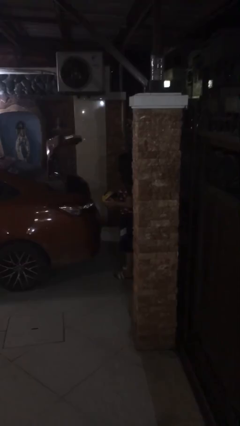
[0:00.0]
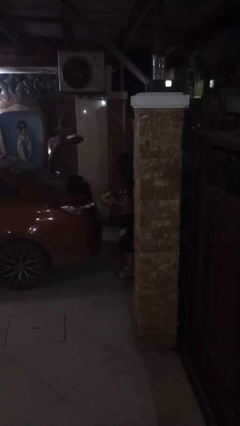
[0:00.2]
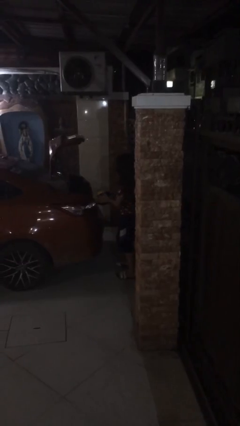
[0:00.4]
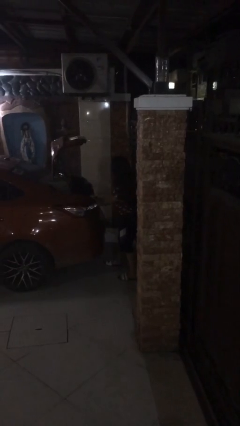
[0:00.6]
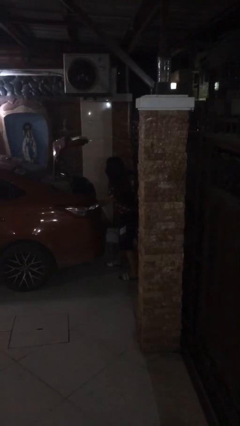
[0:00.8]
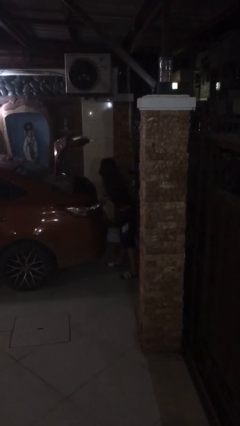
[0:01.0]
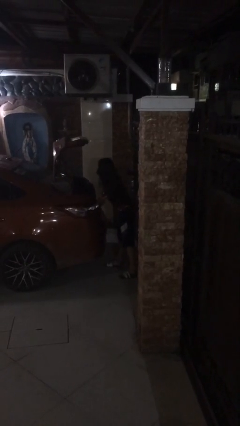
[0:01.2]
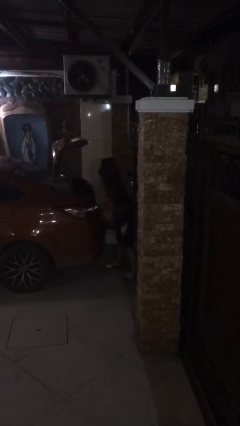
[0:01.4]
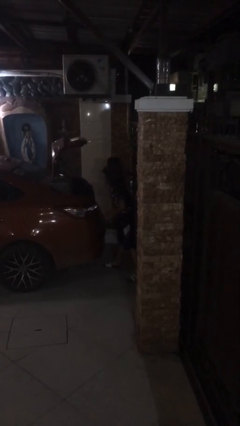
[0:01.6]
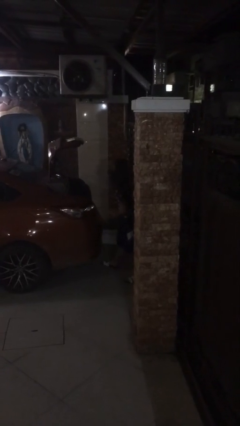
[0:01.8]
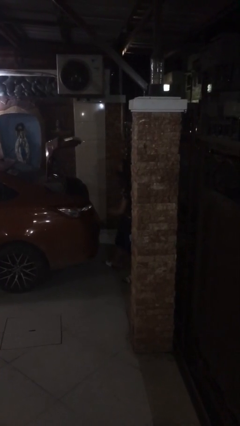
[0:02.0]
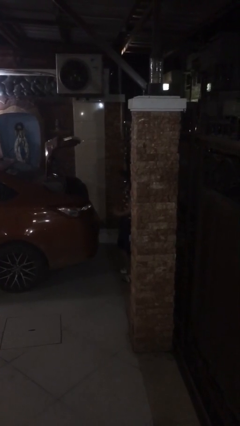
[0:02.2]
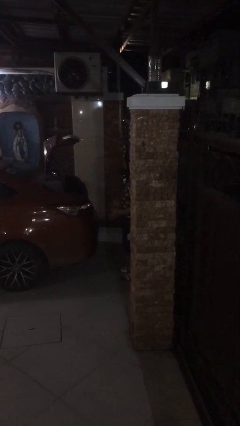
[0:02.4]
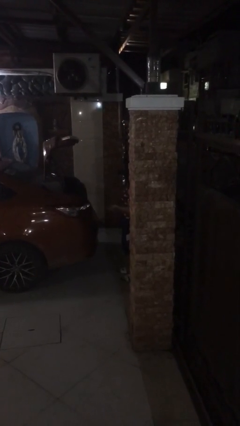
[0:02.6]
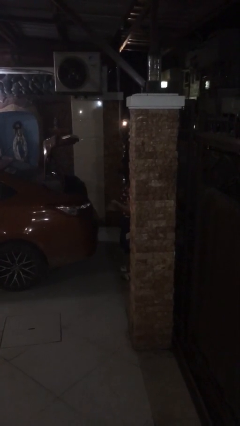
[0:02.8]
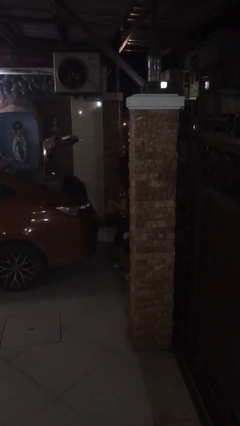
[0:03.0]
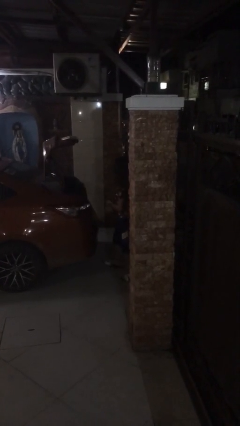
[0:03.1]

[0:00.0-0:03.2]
person loads car

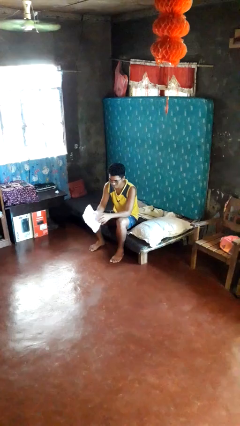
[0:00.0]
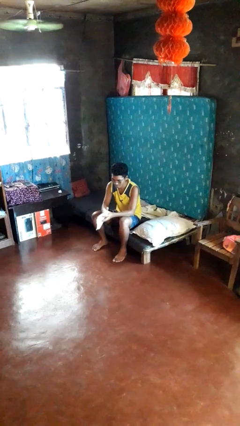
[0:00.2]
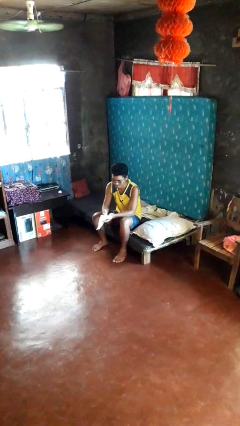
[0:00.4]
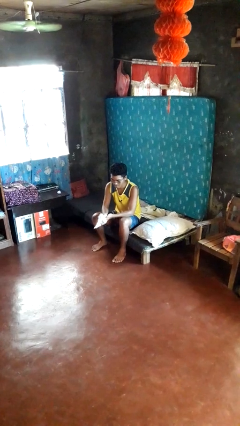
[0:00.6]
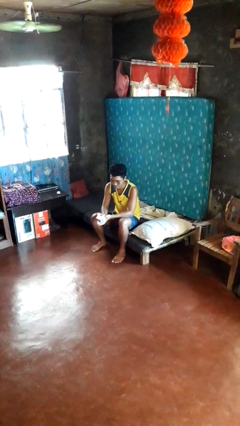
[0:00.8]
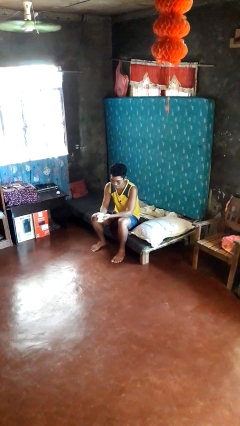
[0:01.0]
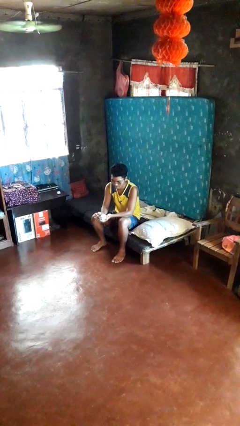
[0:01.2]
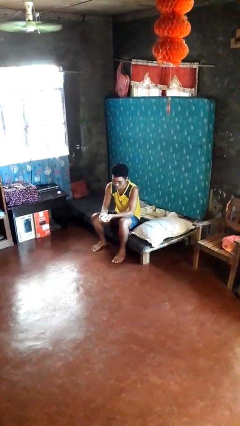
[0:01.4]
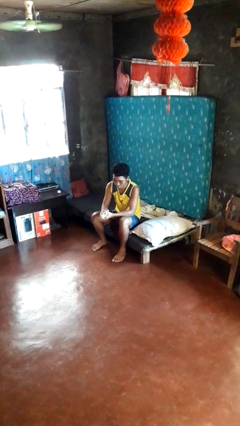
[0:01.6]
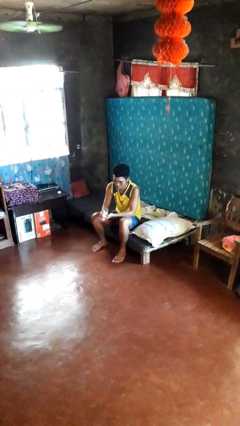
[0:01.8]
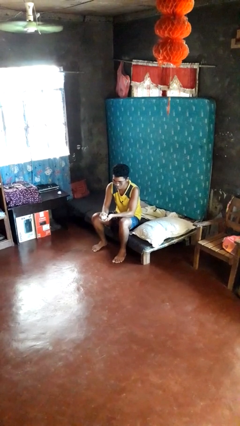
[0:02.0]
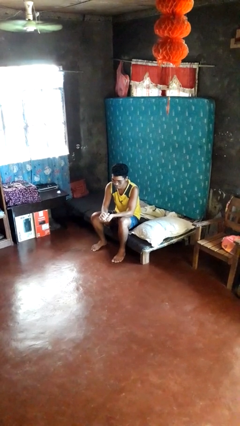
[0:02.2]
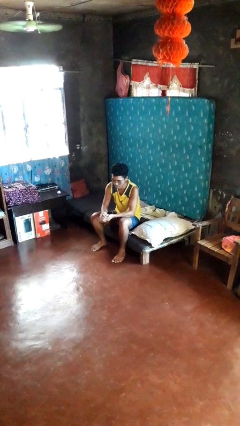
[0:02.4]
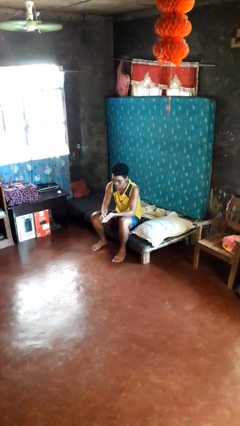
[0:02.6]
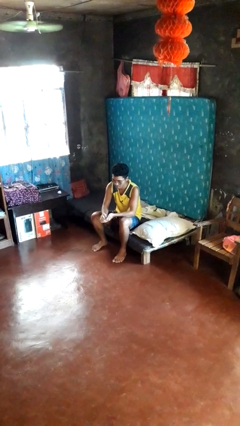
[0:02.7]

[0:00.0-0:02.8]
person crumples paper

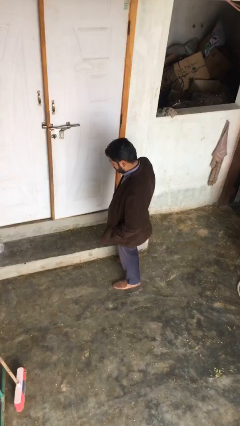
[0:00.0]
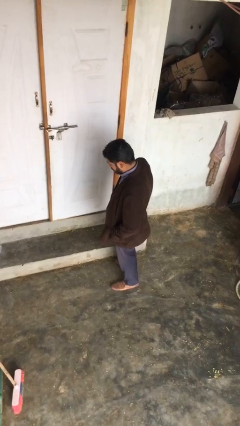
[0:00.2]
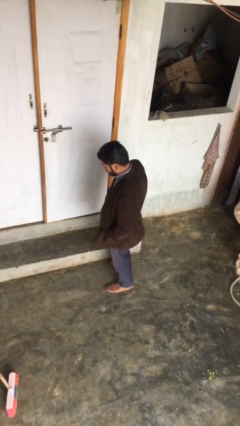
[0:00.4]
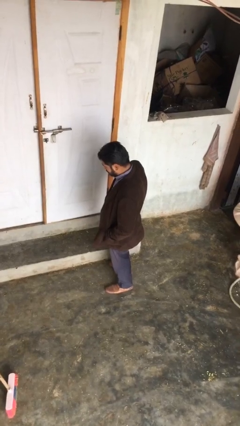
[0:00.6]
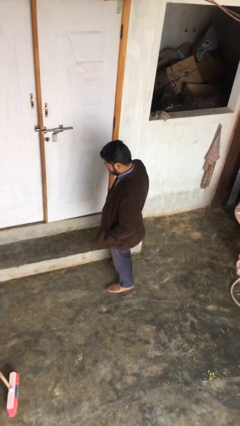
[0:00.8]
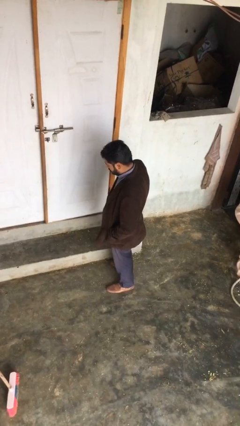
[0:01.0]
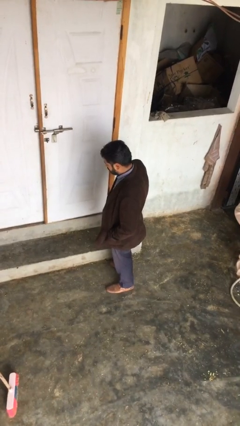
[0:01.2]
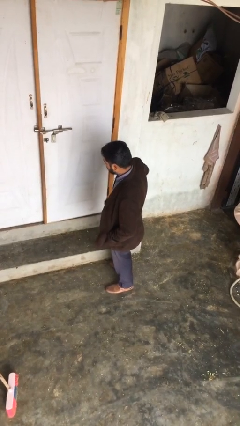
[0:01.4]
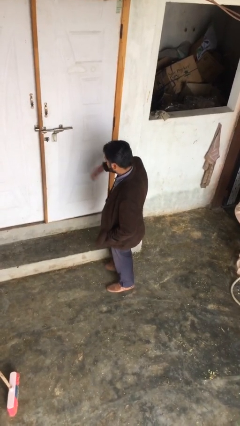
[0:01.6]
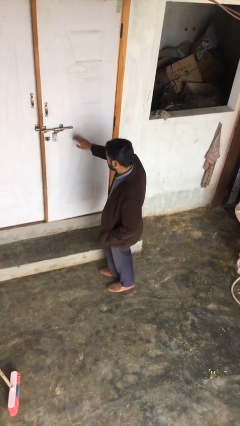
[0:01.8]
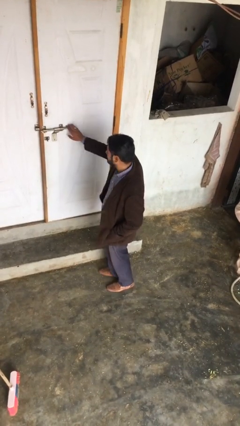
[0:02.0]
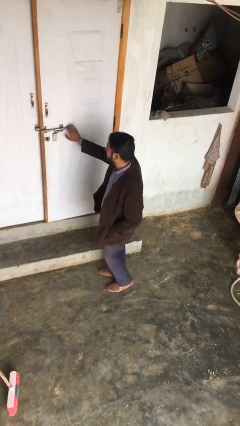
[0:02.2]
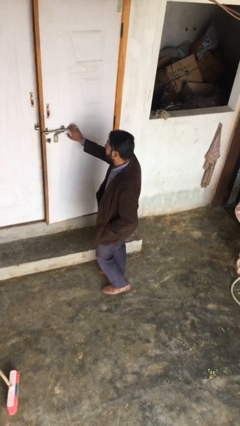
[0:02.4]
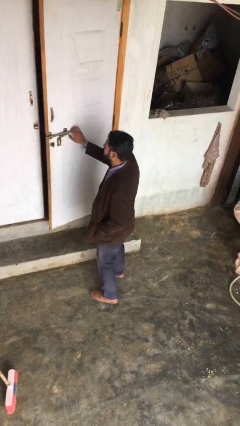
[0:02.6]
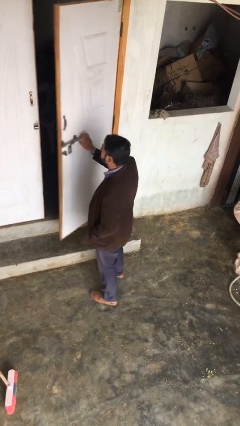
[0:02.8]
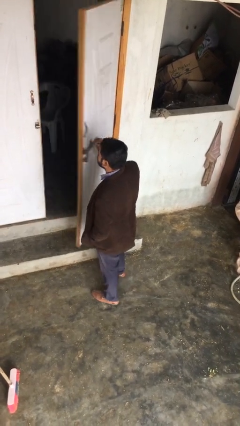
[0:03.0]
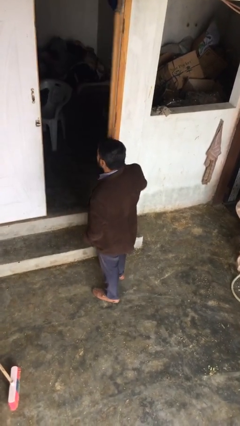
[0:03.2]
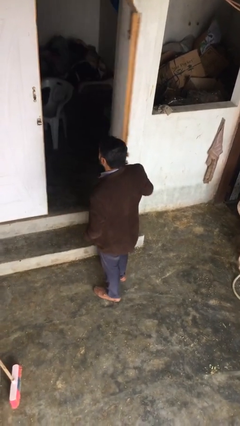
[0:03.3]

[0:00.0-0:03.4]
person opens facility door

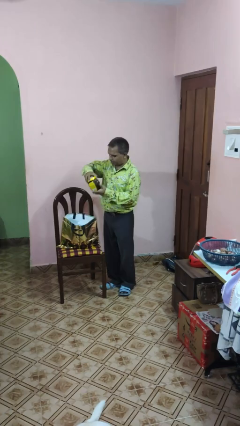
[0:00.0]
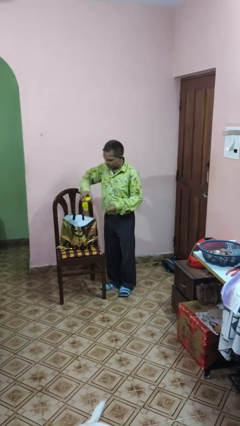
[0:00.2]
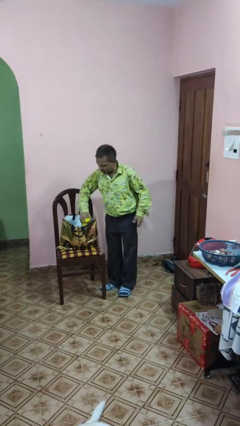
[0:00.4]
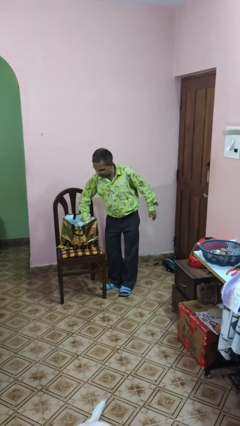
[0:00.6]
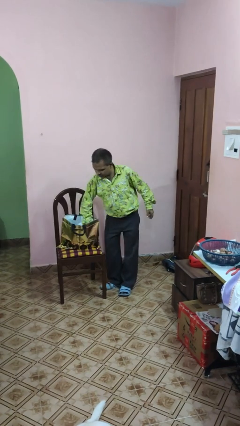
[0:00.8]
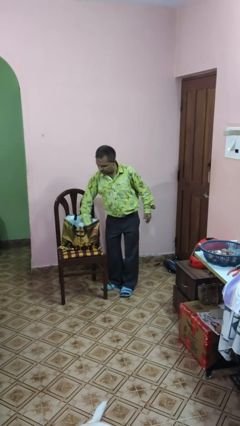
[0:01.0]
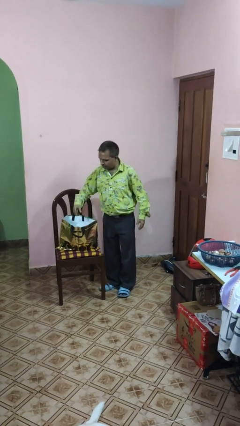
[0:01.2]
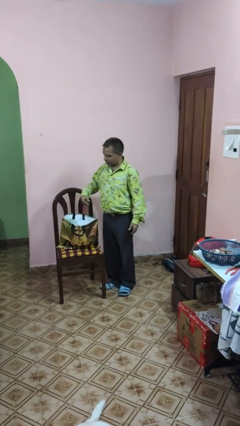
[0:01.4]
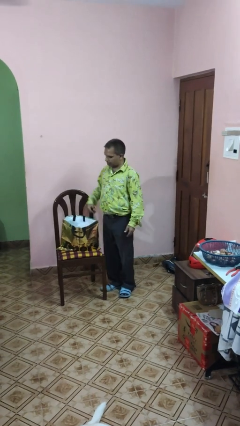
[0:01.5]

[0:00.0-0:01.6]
person puts object into bag

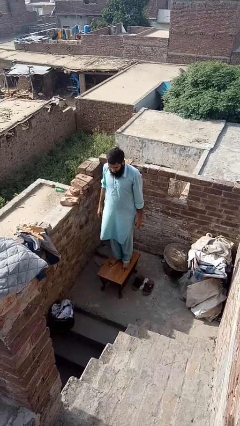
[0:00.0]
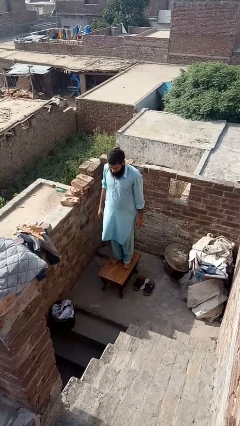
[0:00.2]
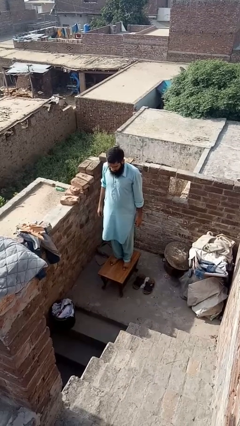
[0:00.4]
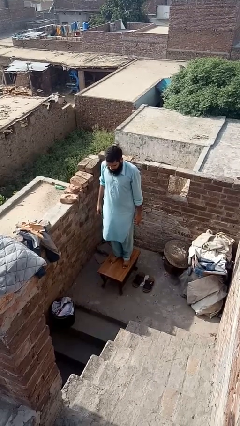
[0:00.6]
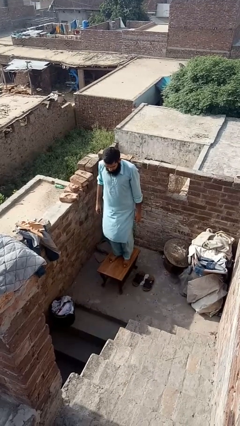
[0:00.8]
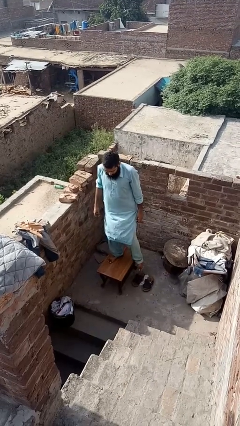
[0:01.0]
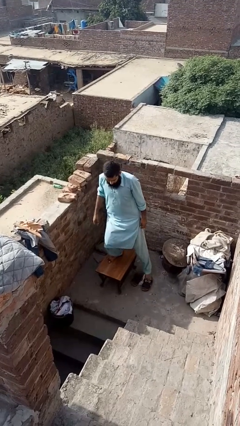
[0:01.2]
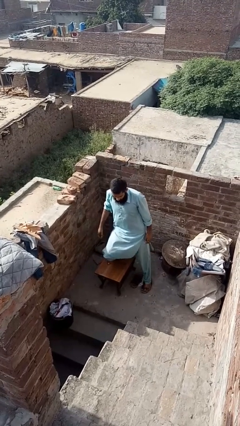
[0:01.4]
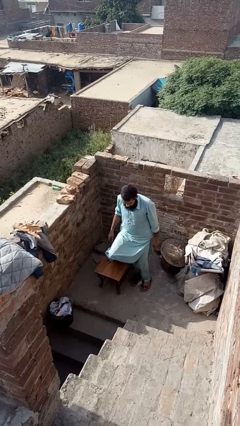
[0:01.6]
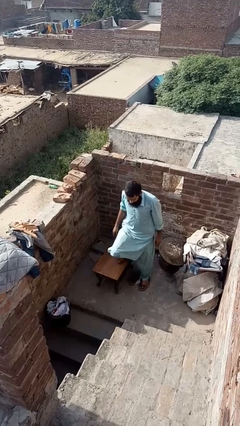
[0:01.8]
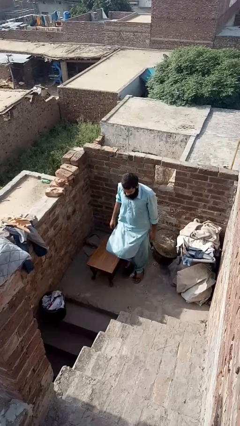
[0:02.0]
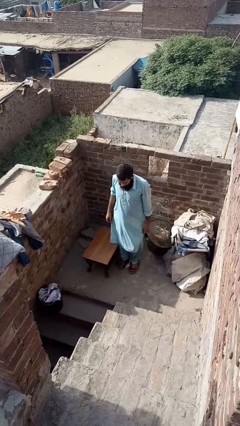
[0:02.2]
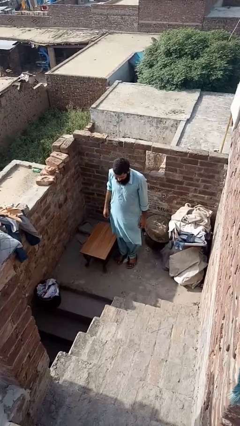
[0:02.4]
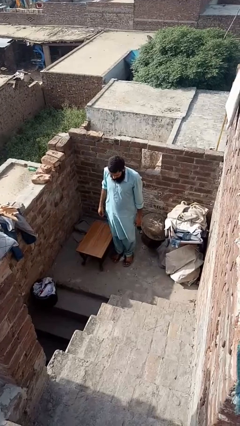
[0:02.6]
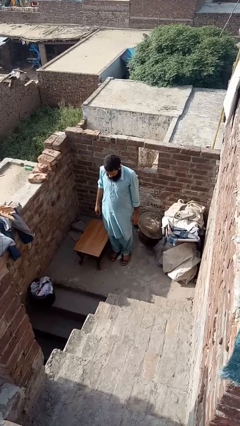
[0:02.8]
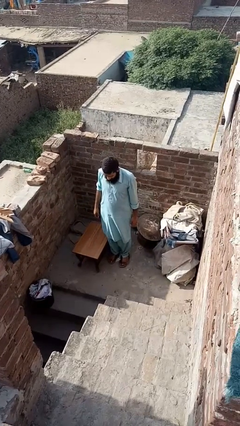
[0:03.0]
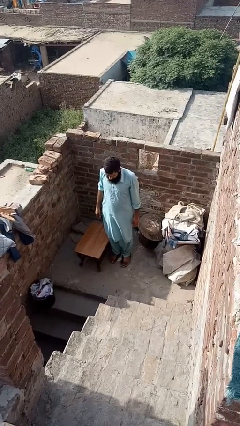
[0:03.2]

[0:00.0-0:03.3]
person climbs off table

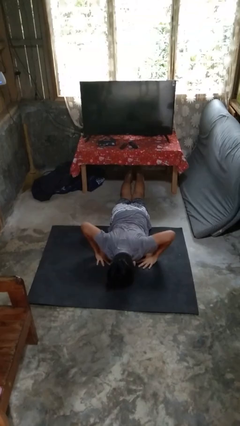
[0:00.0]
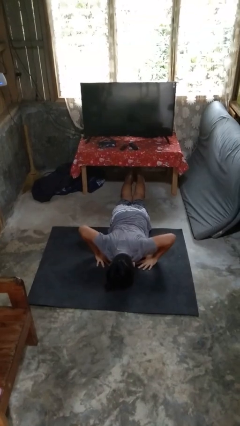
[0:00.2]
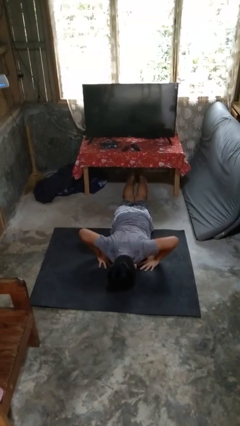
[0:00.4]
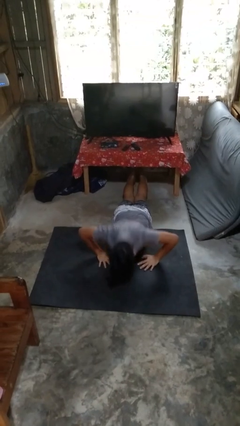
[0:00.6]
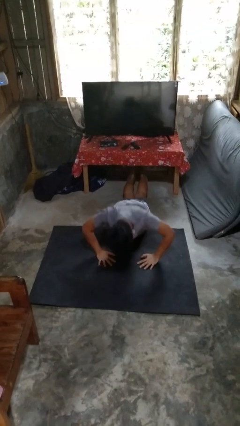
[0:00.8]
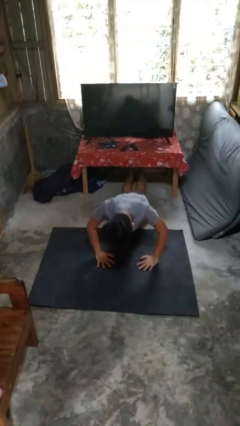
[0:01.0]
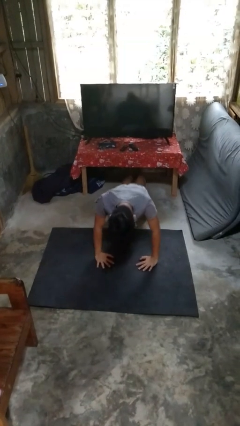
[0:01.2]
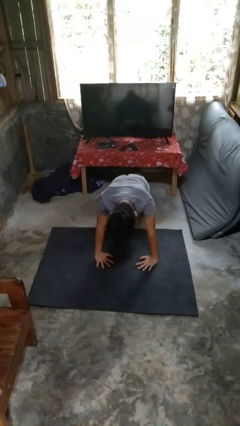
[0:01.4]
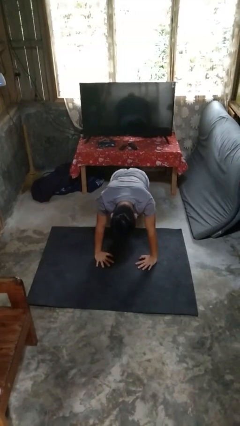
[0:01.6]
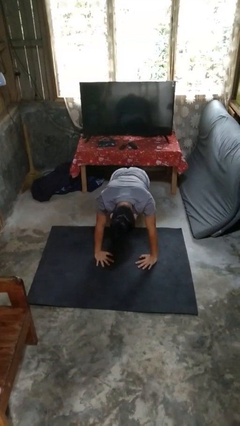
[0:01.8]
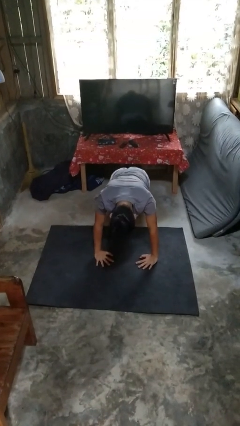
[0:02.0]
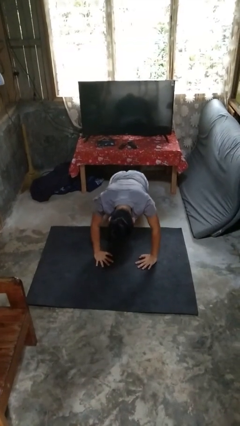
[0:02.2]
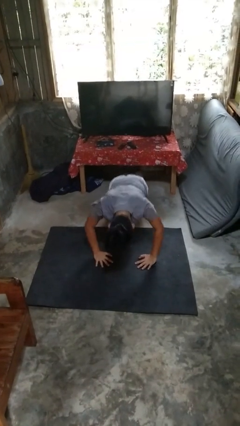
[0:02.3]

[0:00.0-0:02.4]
person exercises with pushup

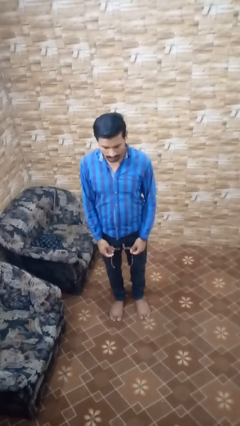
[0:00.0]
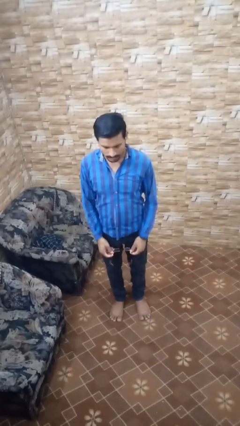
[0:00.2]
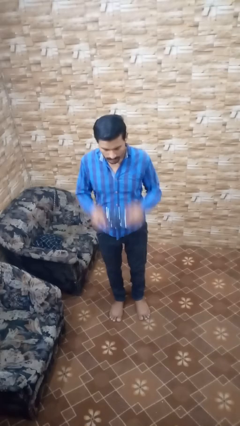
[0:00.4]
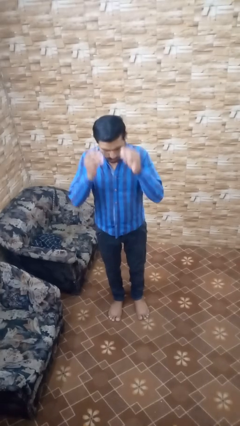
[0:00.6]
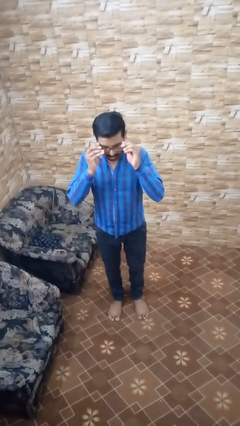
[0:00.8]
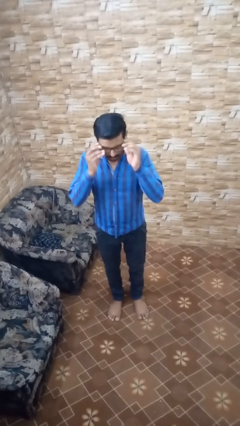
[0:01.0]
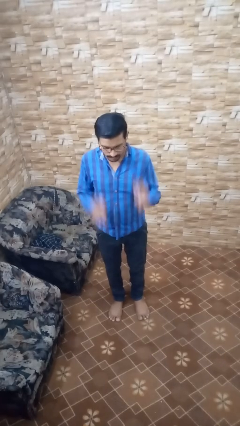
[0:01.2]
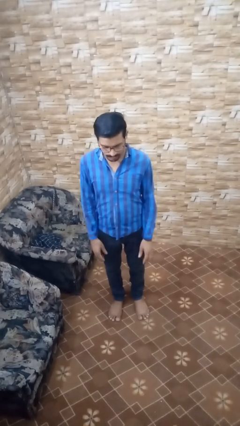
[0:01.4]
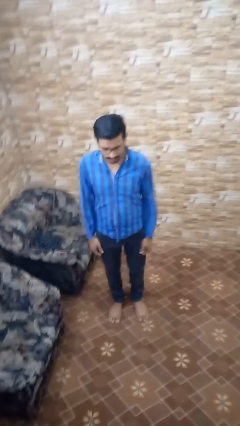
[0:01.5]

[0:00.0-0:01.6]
person puts on glasses
